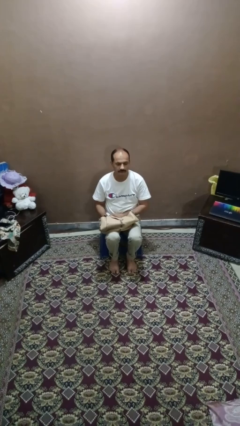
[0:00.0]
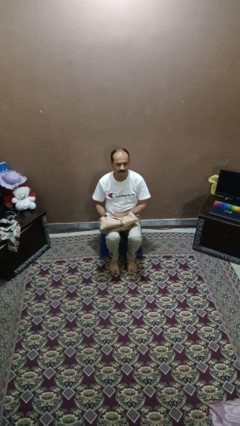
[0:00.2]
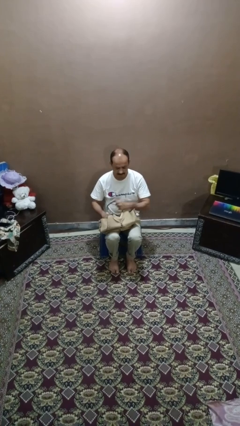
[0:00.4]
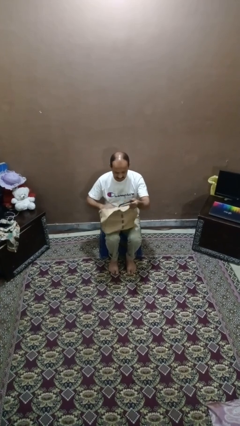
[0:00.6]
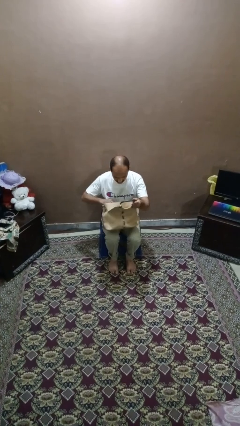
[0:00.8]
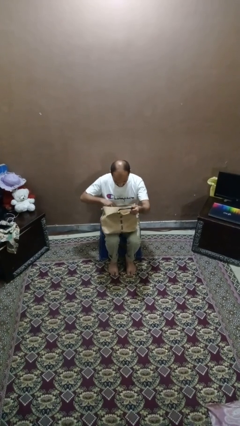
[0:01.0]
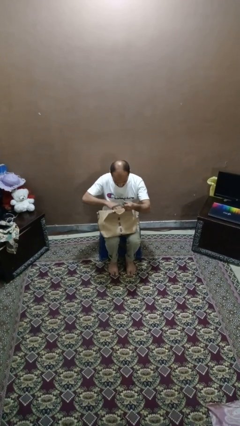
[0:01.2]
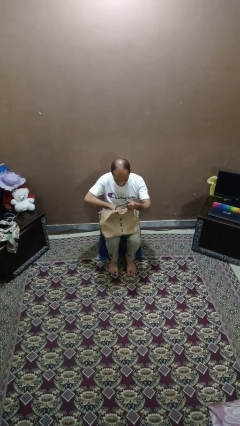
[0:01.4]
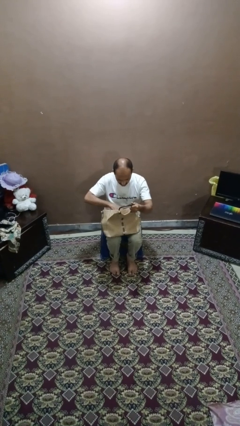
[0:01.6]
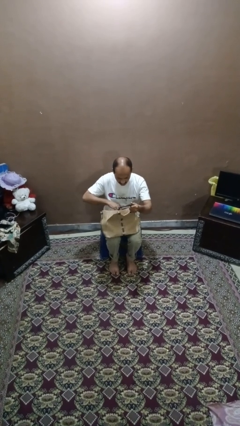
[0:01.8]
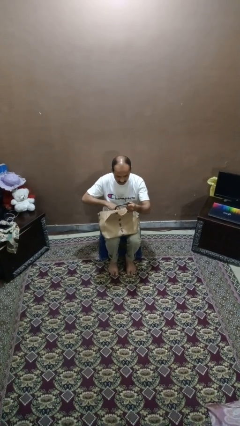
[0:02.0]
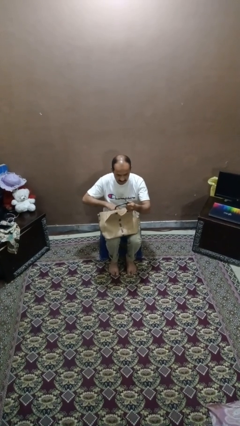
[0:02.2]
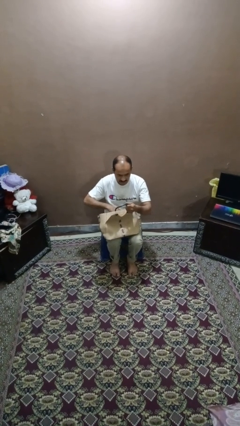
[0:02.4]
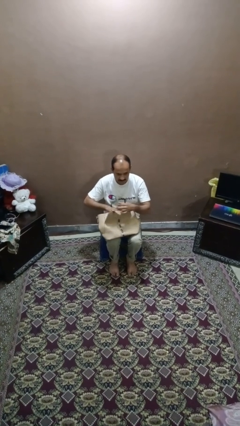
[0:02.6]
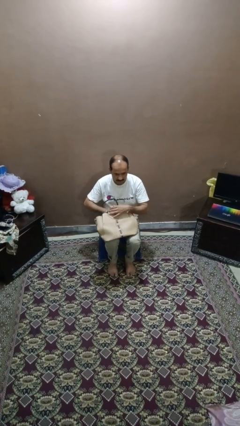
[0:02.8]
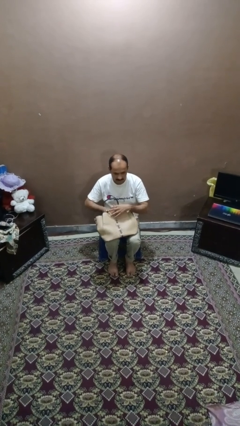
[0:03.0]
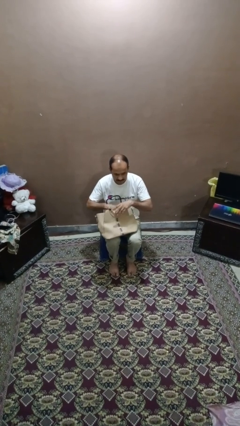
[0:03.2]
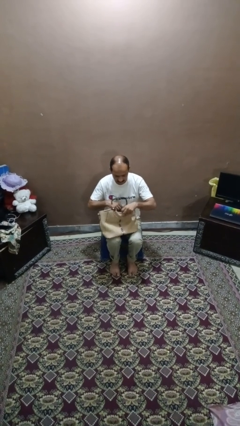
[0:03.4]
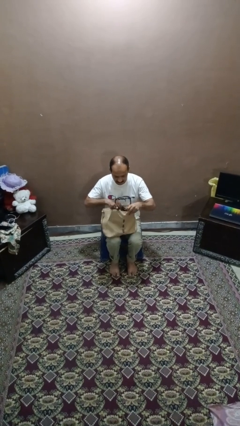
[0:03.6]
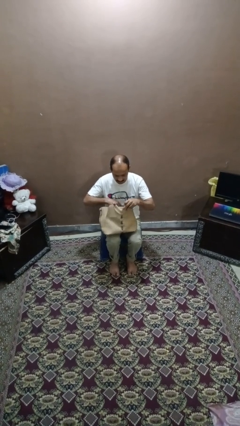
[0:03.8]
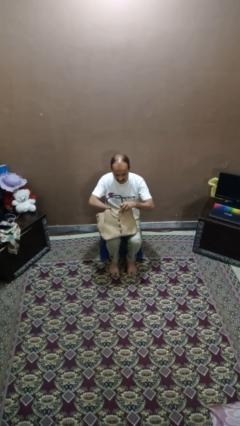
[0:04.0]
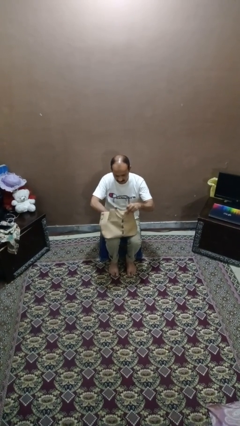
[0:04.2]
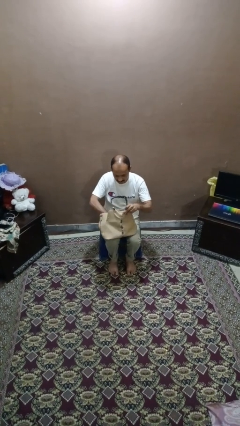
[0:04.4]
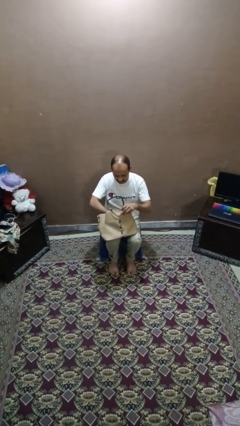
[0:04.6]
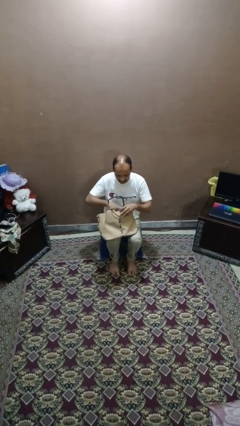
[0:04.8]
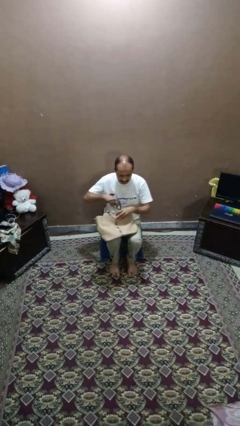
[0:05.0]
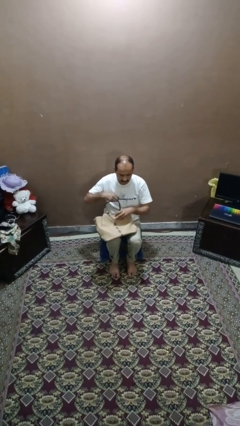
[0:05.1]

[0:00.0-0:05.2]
person searches in purse

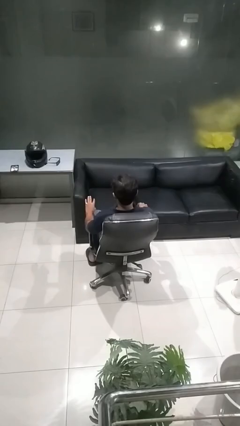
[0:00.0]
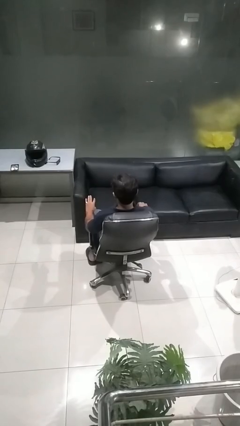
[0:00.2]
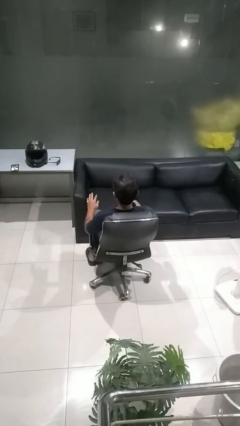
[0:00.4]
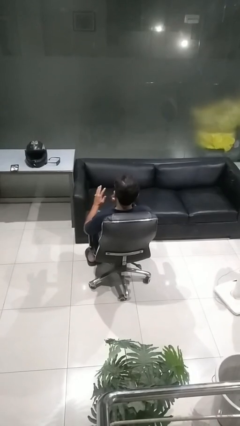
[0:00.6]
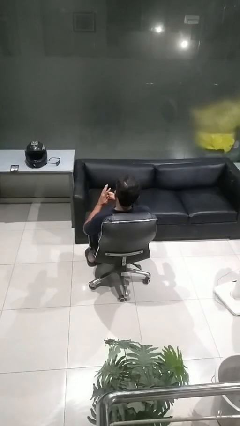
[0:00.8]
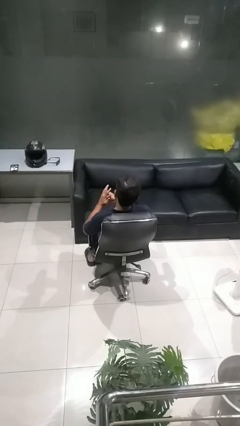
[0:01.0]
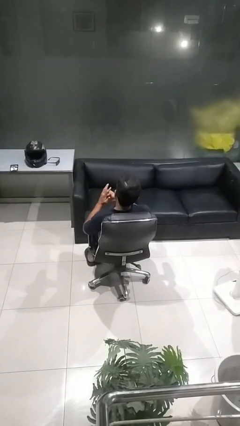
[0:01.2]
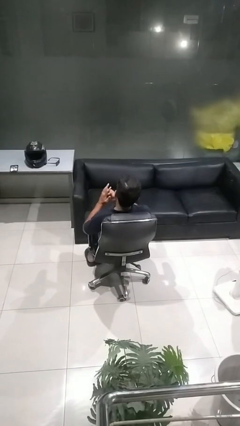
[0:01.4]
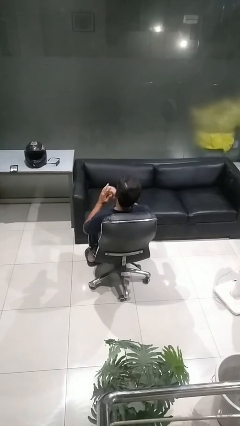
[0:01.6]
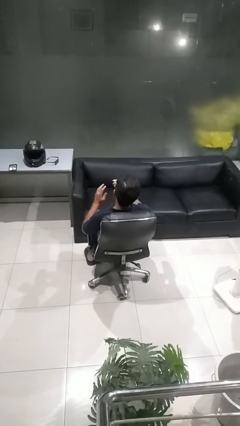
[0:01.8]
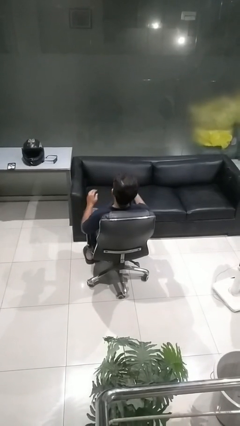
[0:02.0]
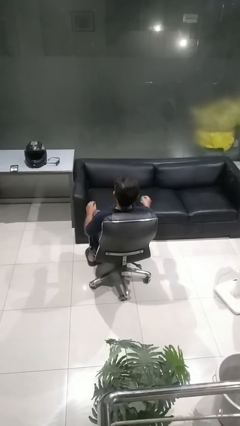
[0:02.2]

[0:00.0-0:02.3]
person takes off ring

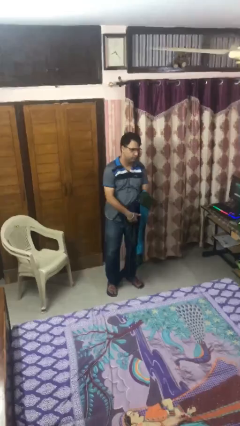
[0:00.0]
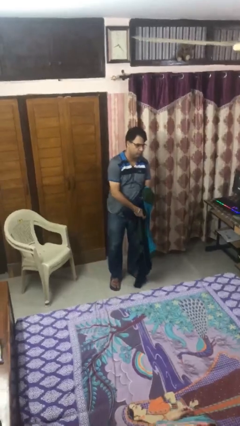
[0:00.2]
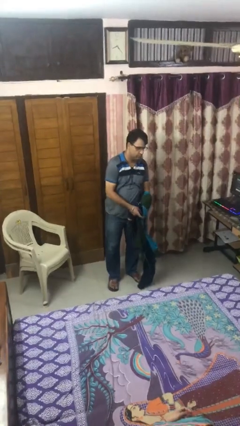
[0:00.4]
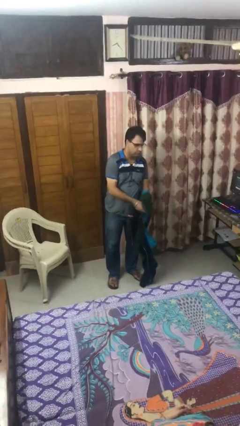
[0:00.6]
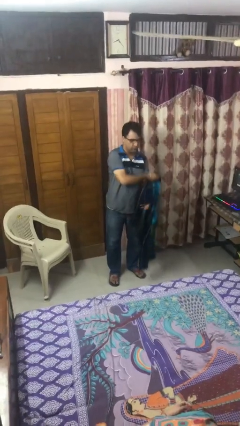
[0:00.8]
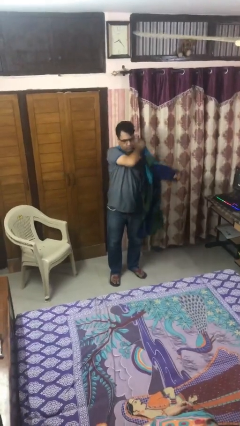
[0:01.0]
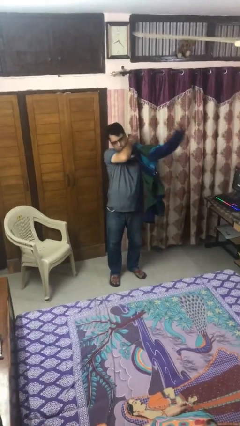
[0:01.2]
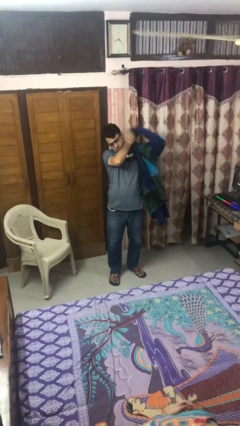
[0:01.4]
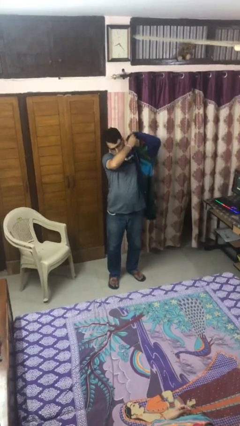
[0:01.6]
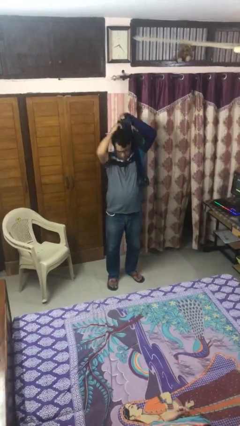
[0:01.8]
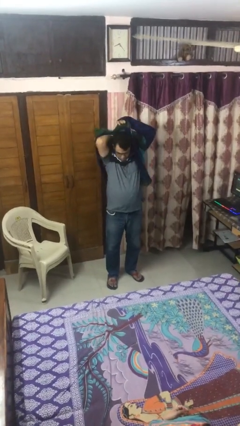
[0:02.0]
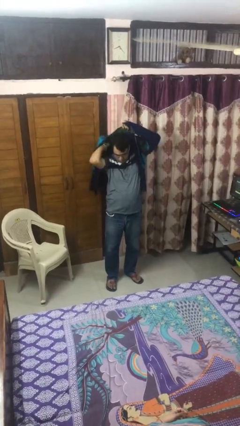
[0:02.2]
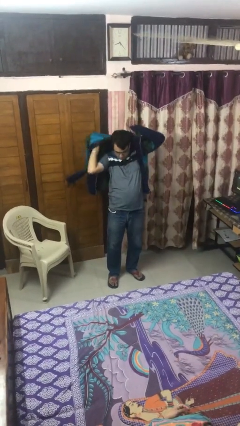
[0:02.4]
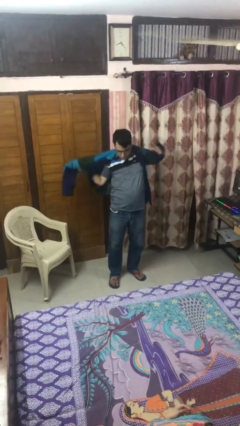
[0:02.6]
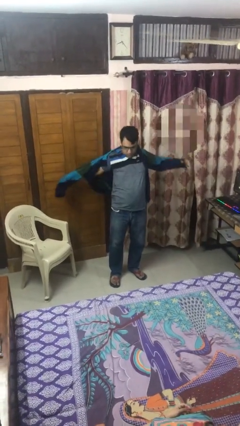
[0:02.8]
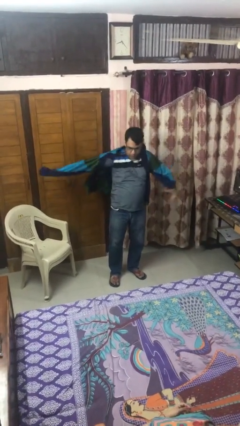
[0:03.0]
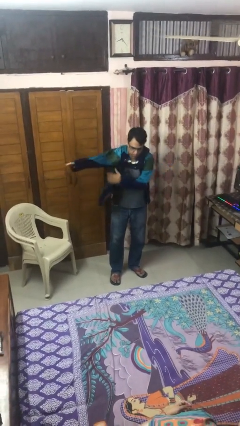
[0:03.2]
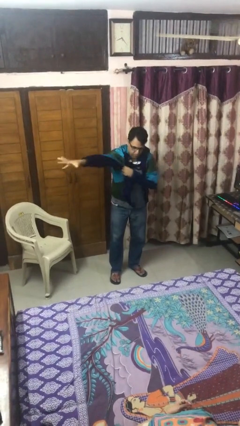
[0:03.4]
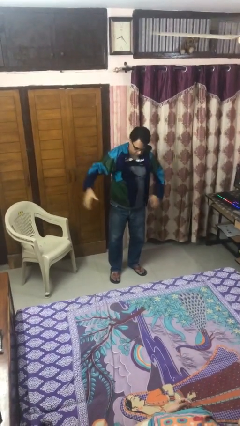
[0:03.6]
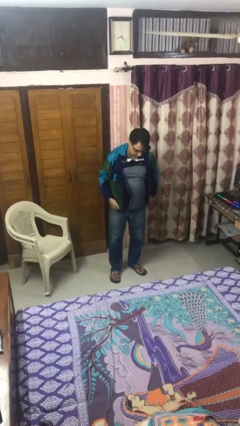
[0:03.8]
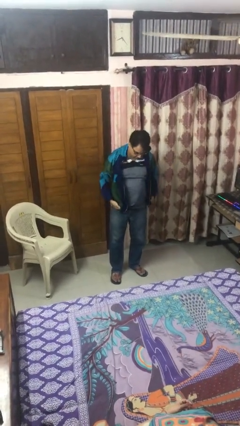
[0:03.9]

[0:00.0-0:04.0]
person puts on jacket

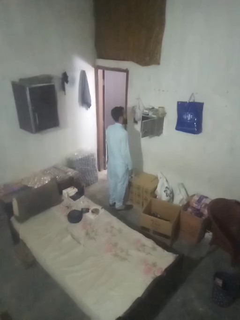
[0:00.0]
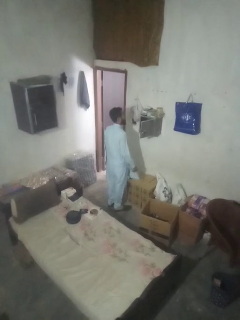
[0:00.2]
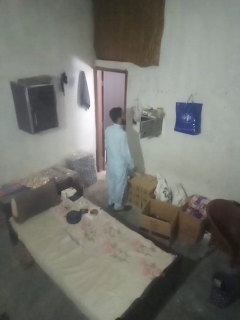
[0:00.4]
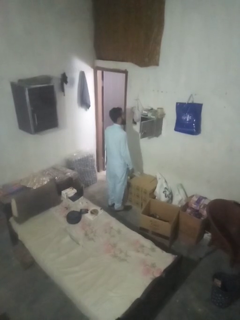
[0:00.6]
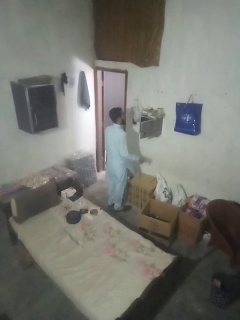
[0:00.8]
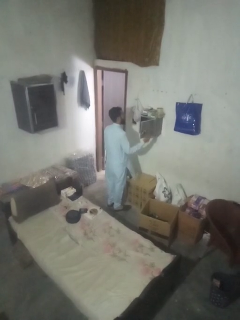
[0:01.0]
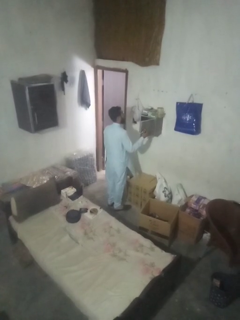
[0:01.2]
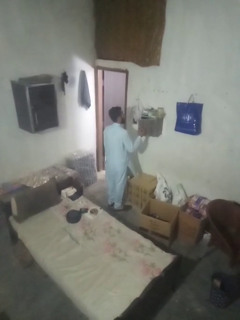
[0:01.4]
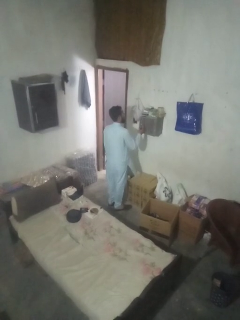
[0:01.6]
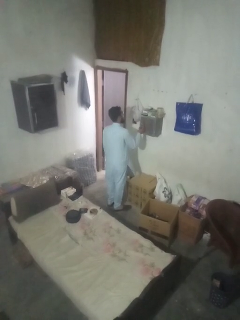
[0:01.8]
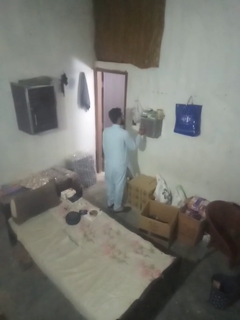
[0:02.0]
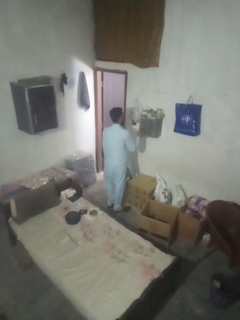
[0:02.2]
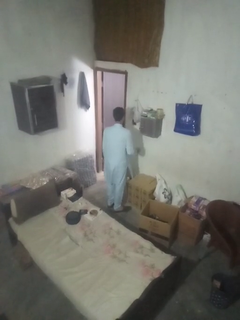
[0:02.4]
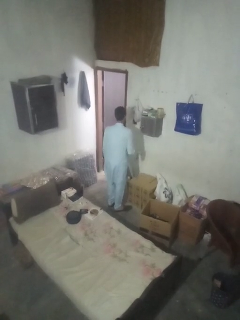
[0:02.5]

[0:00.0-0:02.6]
person closes mailbox

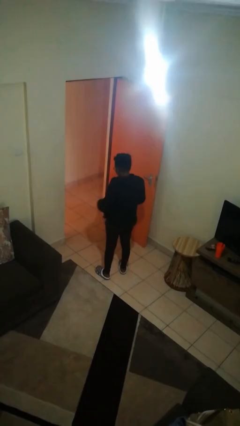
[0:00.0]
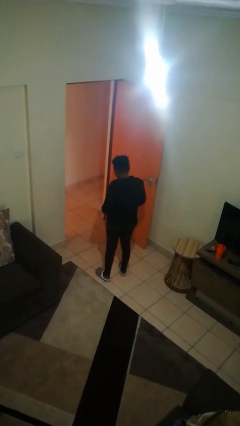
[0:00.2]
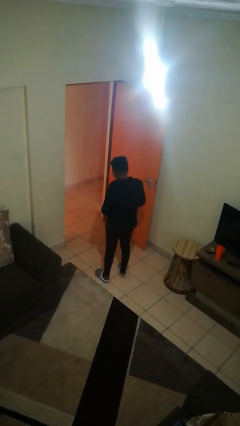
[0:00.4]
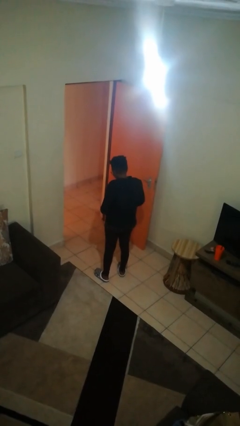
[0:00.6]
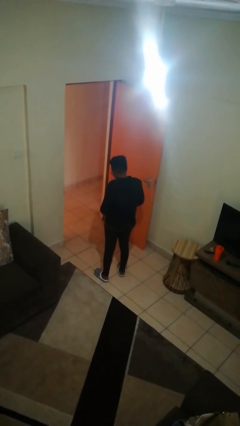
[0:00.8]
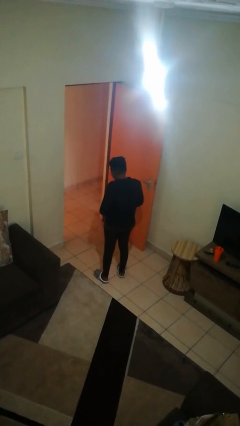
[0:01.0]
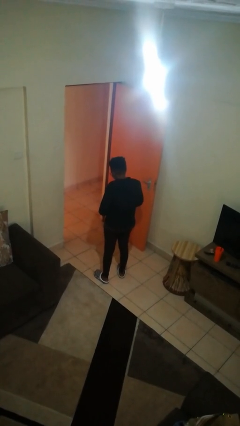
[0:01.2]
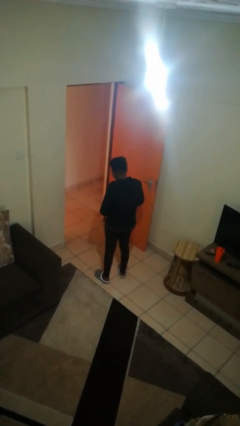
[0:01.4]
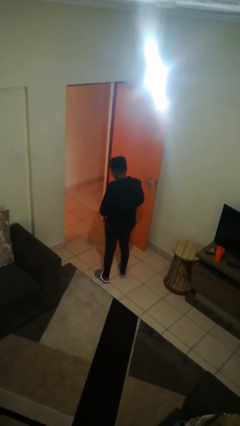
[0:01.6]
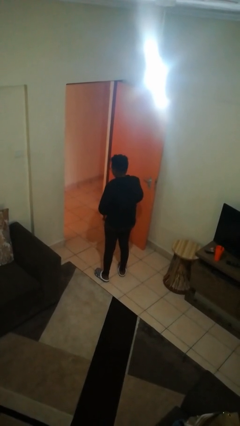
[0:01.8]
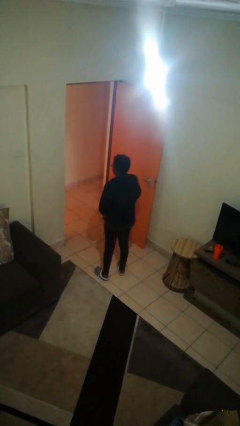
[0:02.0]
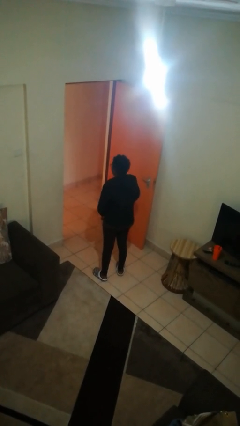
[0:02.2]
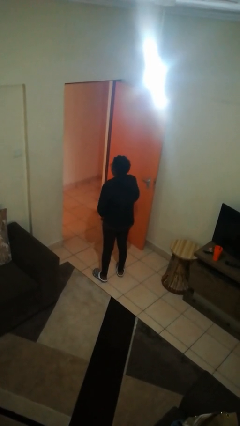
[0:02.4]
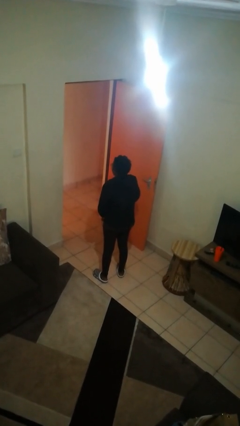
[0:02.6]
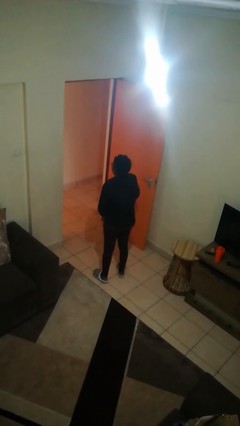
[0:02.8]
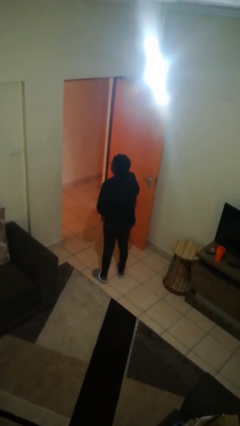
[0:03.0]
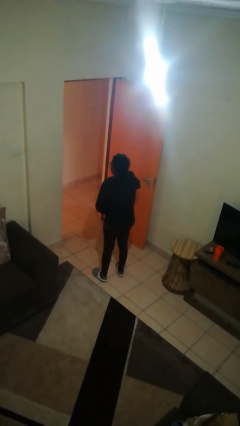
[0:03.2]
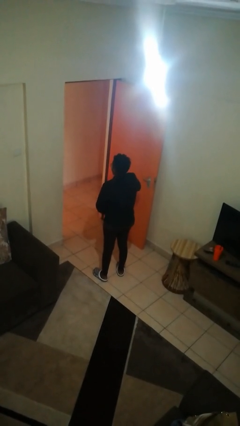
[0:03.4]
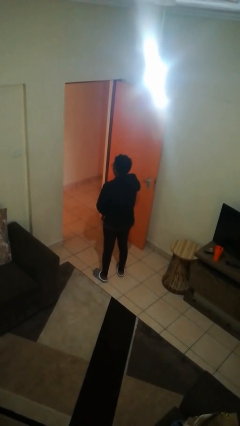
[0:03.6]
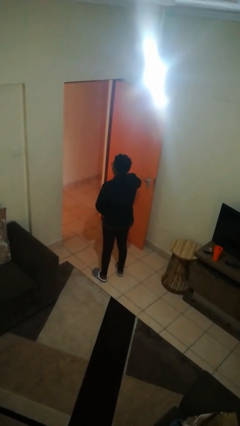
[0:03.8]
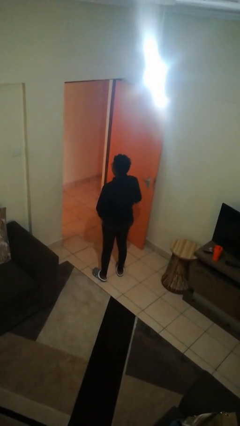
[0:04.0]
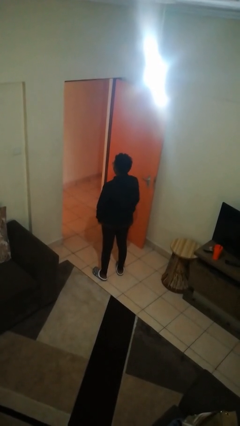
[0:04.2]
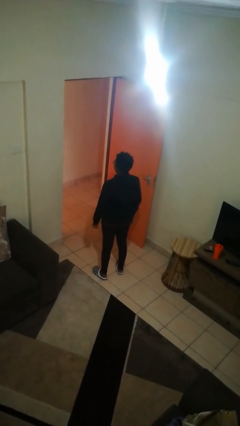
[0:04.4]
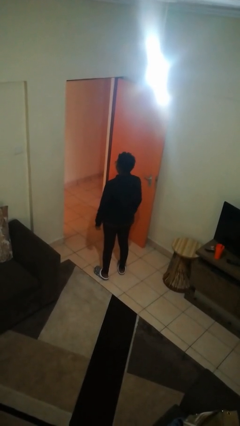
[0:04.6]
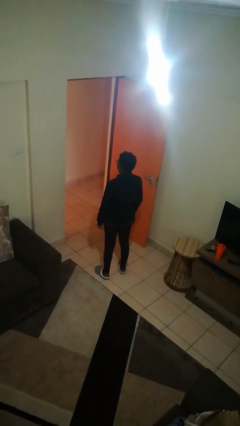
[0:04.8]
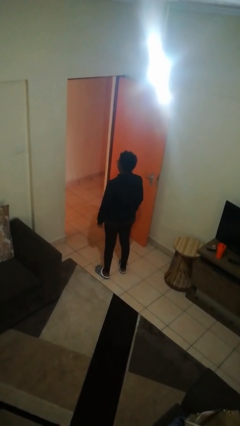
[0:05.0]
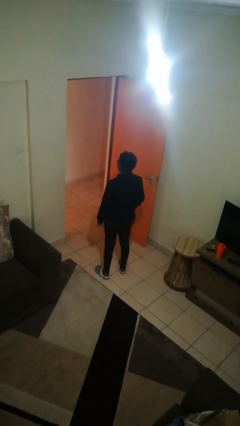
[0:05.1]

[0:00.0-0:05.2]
person zips up jacket
